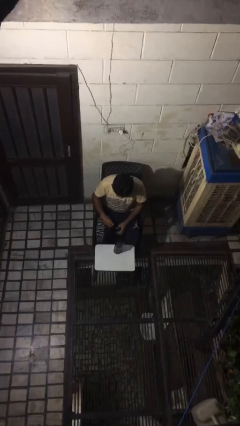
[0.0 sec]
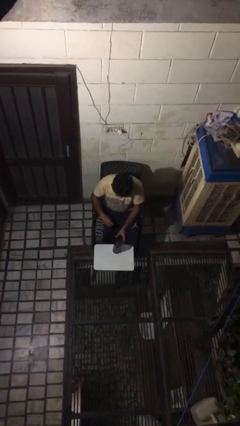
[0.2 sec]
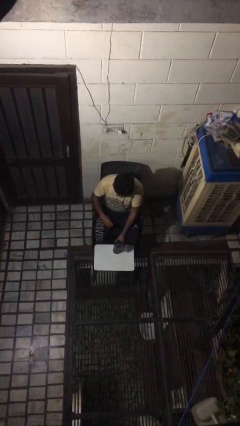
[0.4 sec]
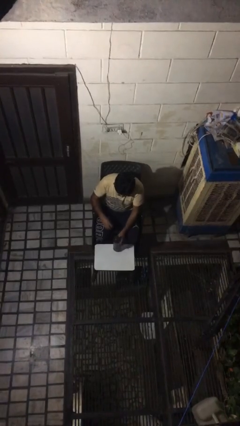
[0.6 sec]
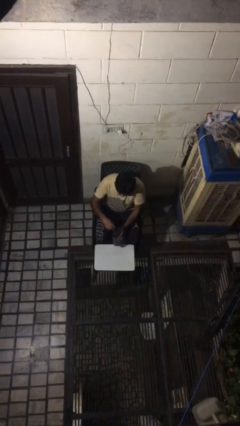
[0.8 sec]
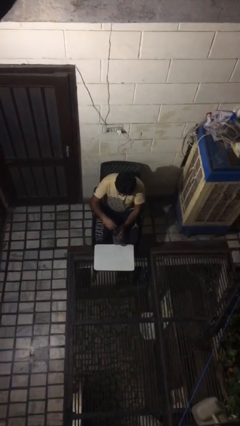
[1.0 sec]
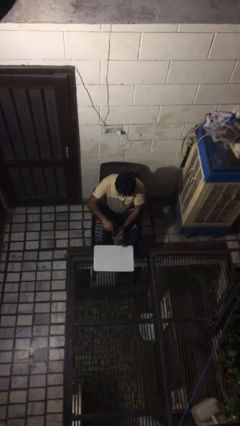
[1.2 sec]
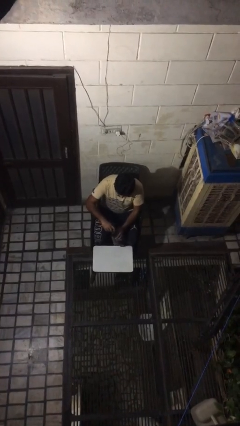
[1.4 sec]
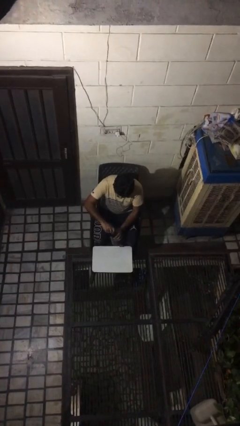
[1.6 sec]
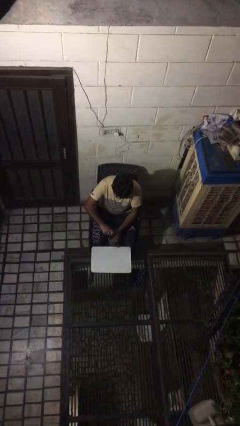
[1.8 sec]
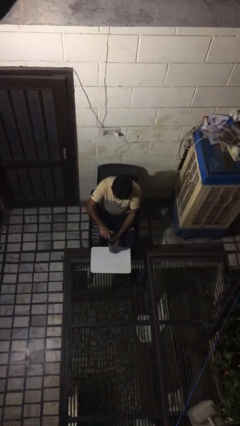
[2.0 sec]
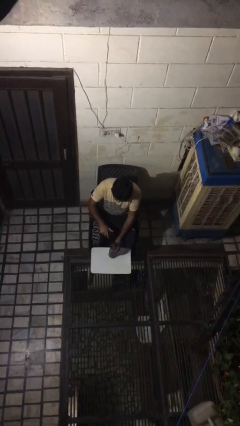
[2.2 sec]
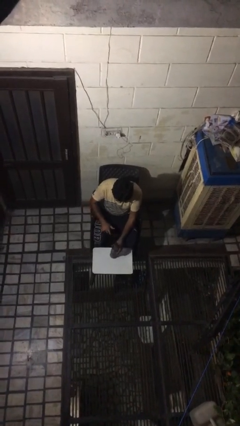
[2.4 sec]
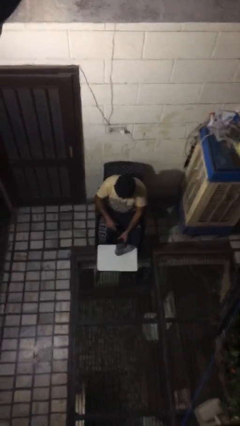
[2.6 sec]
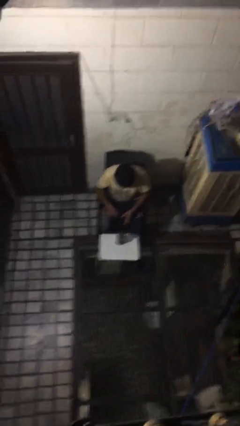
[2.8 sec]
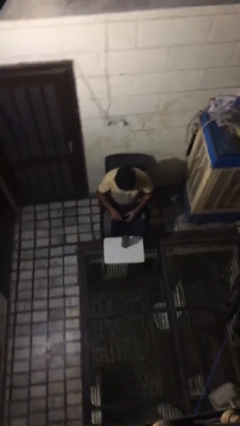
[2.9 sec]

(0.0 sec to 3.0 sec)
person screws lid to bottle

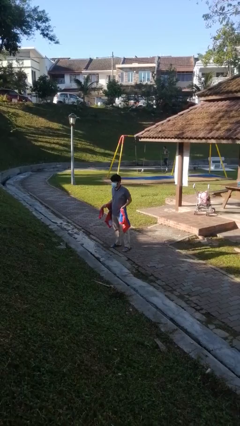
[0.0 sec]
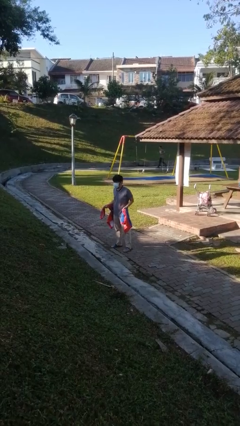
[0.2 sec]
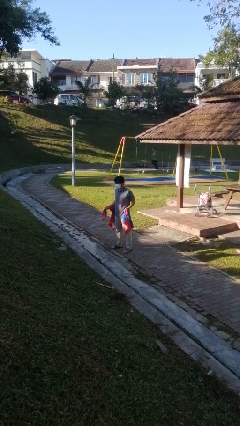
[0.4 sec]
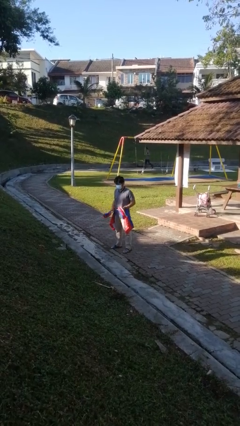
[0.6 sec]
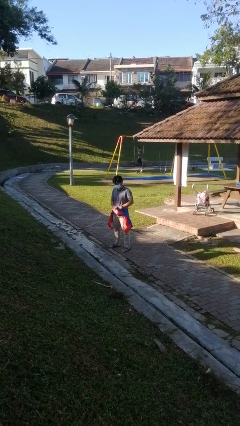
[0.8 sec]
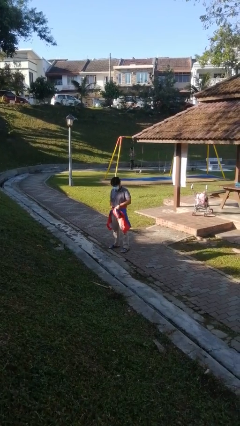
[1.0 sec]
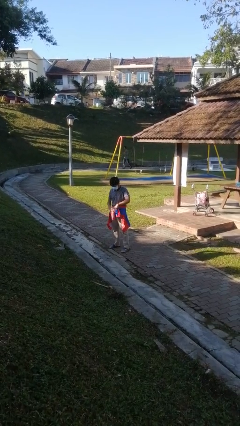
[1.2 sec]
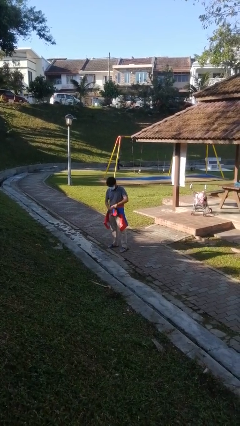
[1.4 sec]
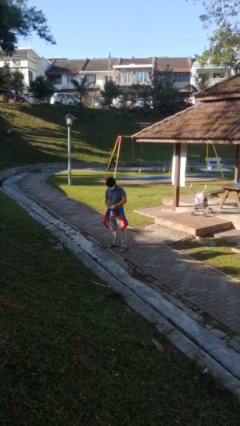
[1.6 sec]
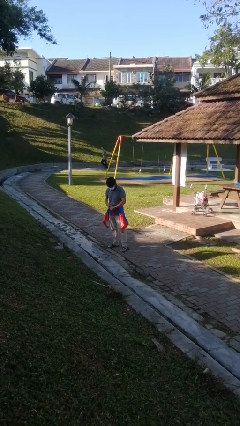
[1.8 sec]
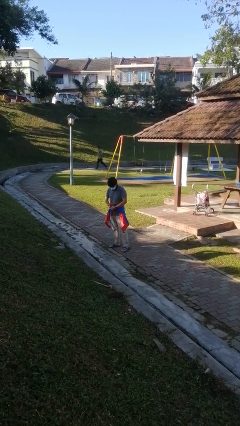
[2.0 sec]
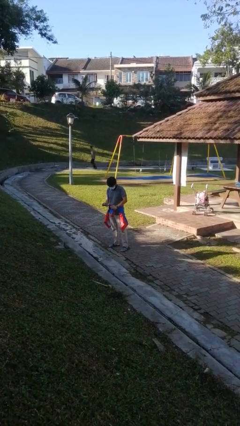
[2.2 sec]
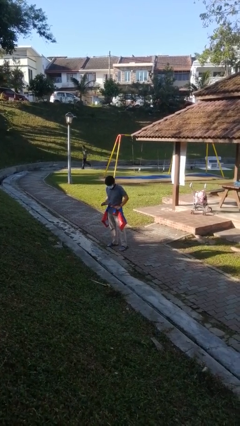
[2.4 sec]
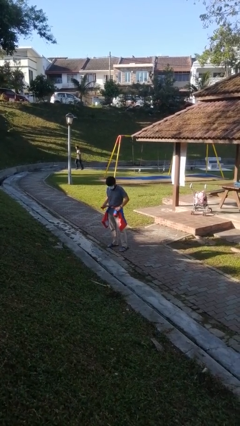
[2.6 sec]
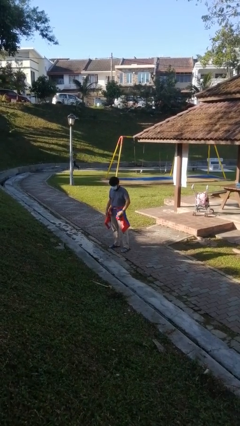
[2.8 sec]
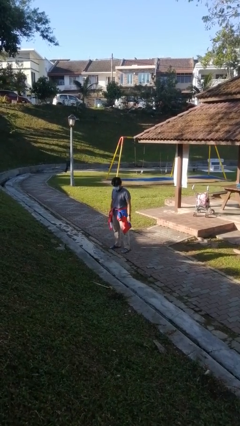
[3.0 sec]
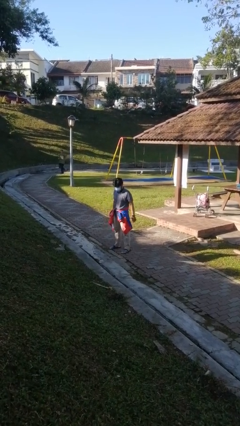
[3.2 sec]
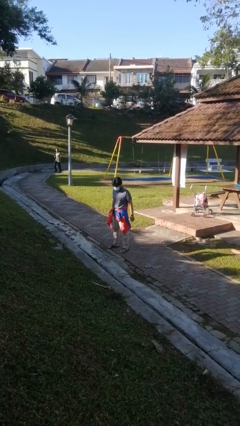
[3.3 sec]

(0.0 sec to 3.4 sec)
person ties jacket around waist

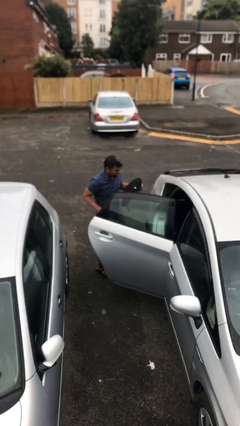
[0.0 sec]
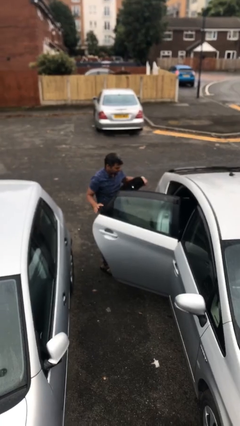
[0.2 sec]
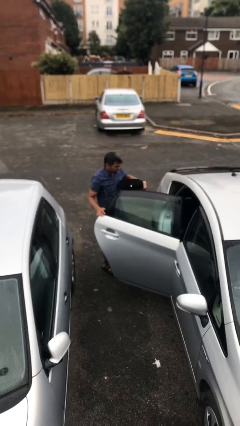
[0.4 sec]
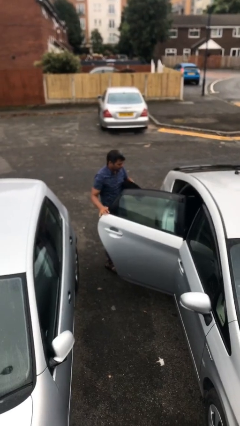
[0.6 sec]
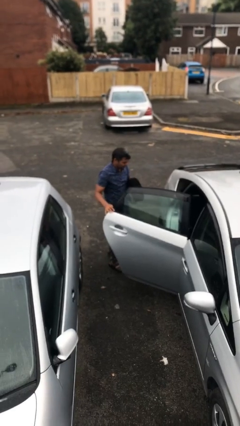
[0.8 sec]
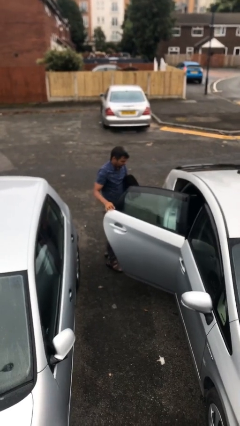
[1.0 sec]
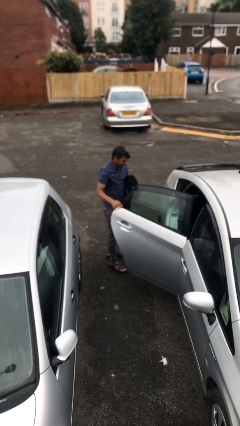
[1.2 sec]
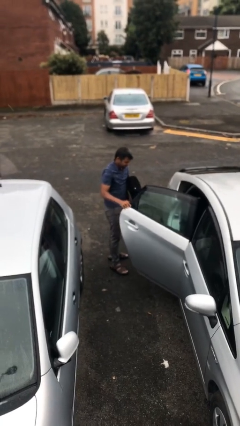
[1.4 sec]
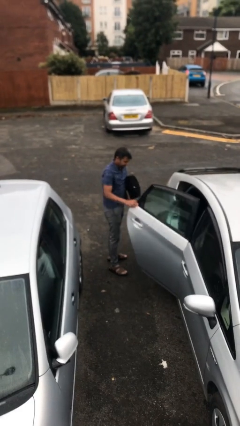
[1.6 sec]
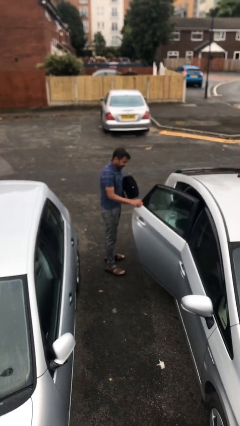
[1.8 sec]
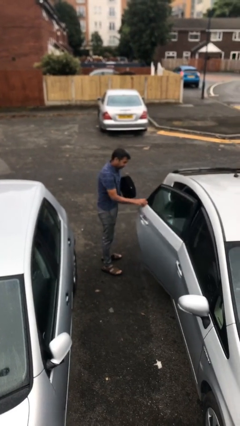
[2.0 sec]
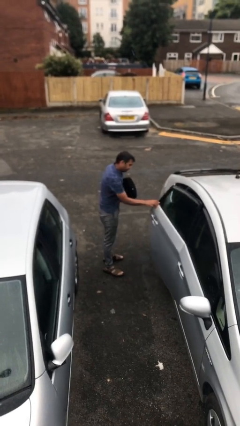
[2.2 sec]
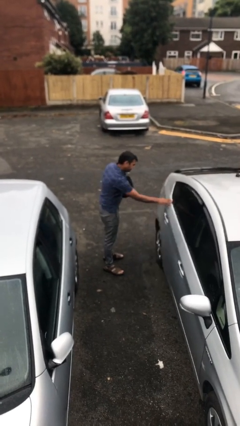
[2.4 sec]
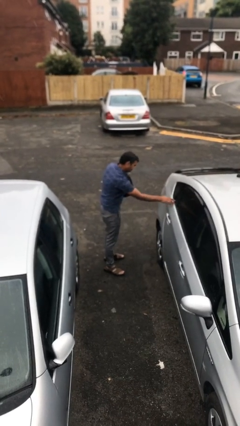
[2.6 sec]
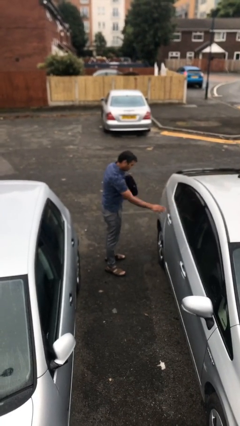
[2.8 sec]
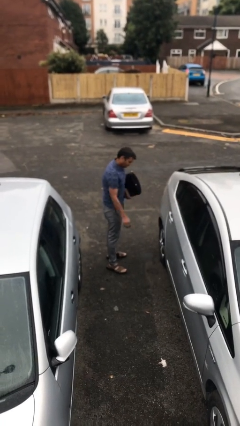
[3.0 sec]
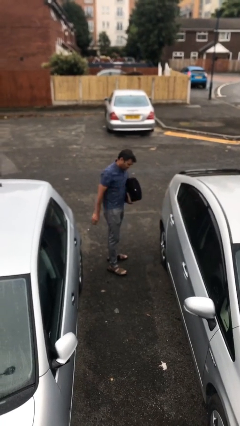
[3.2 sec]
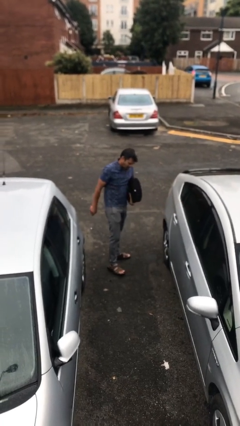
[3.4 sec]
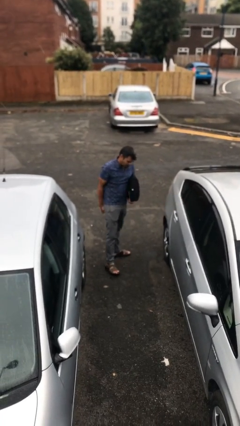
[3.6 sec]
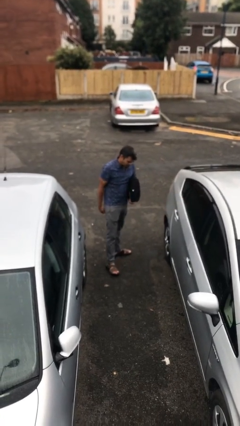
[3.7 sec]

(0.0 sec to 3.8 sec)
person closes car door

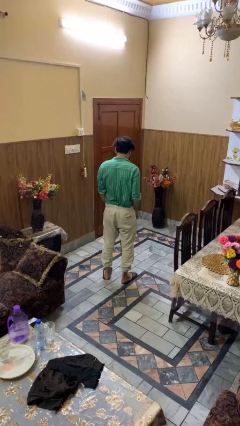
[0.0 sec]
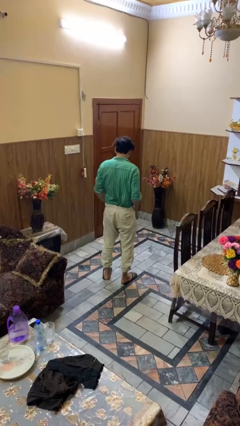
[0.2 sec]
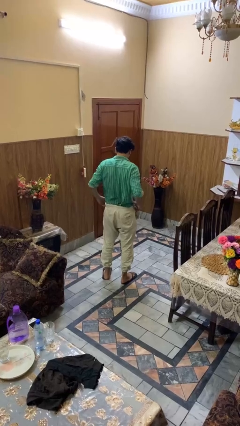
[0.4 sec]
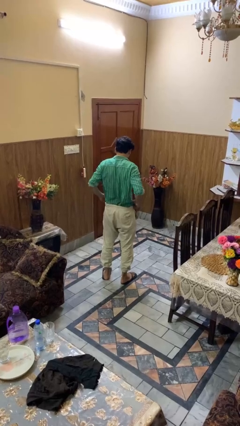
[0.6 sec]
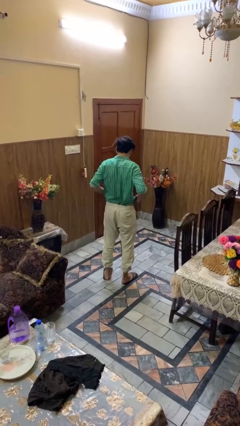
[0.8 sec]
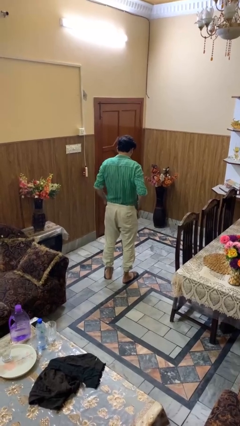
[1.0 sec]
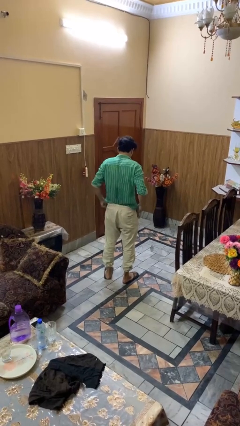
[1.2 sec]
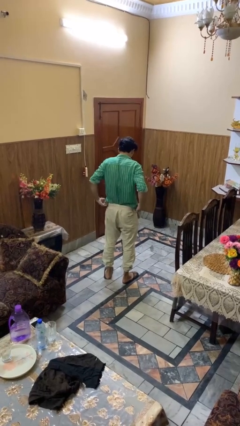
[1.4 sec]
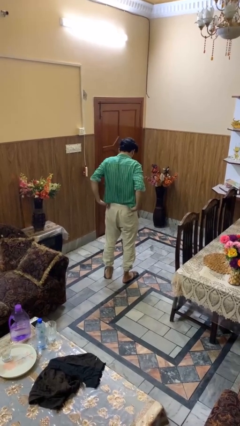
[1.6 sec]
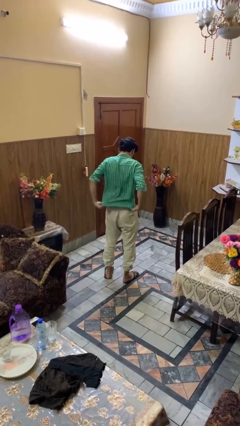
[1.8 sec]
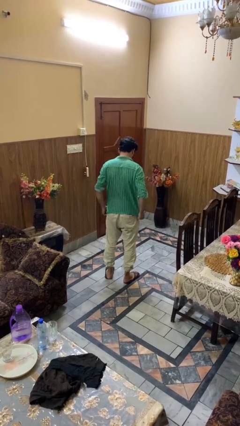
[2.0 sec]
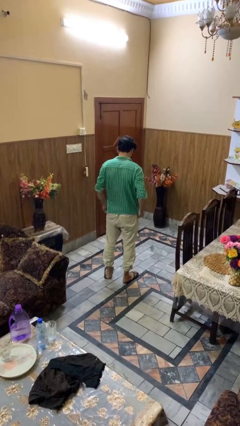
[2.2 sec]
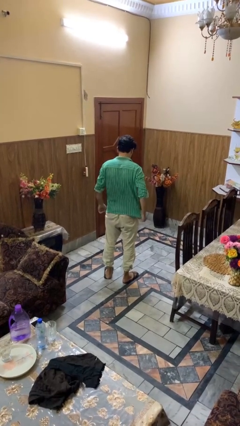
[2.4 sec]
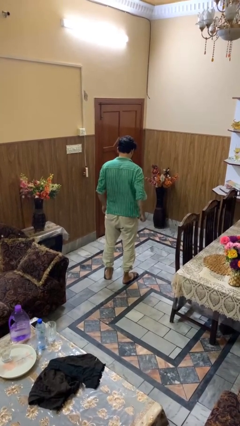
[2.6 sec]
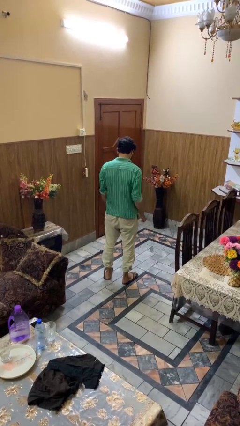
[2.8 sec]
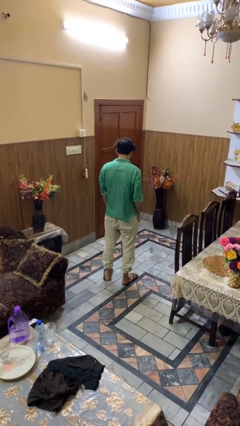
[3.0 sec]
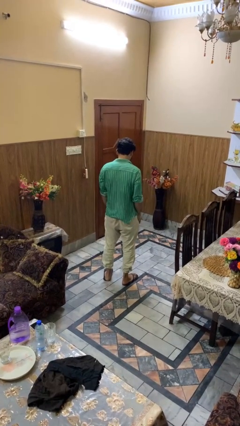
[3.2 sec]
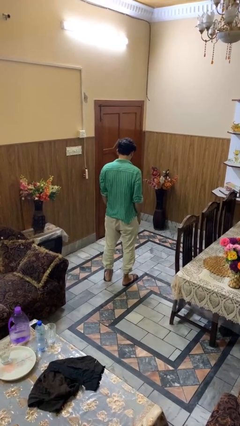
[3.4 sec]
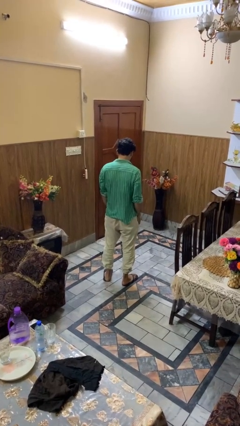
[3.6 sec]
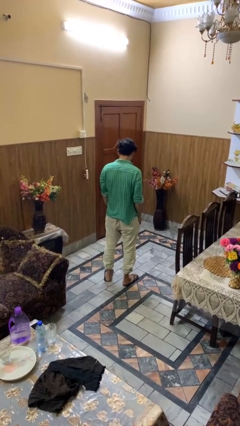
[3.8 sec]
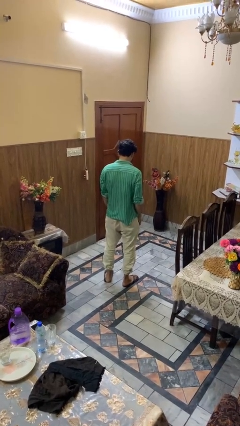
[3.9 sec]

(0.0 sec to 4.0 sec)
person untucks shirt

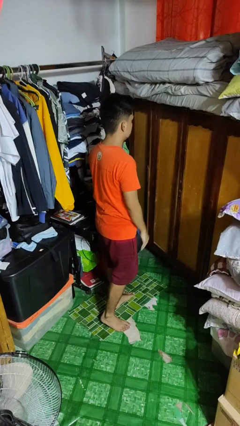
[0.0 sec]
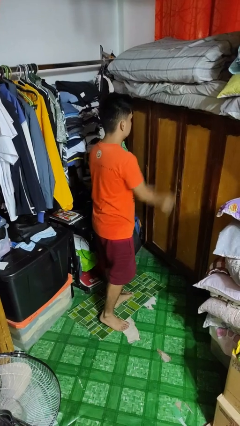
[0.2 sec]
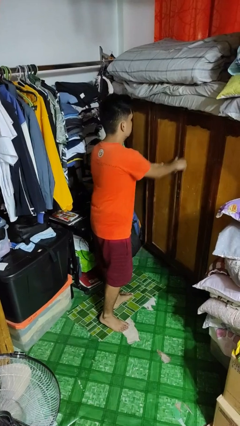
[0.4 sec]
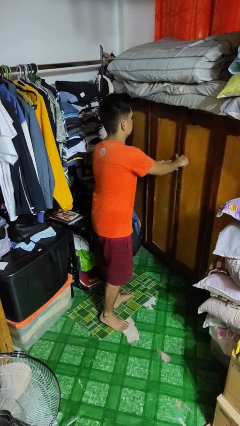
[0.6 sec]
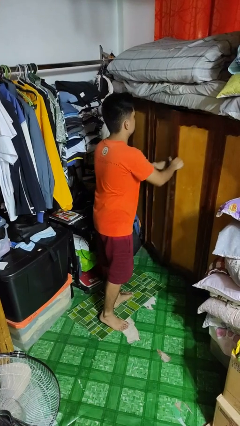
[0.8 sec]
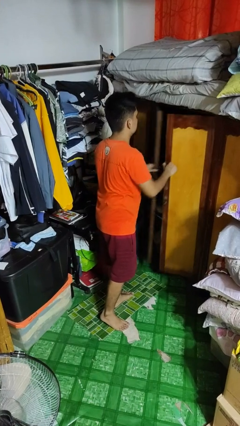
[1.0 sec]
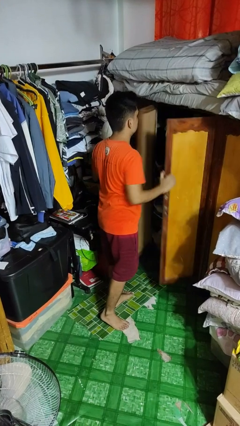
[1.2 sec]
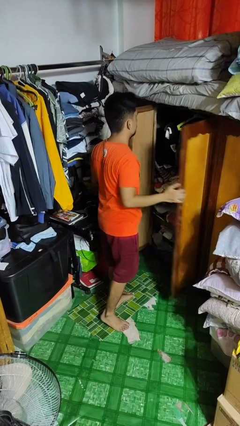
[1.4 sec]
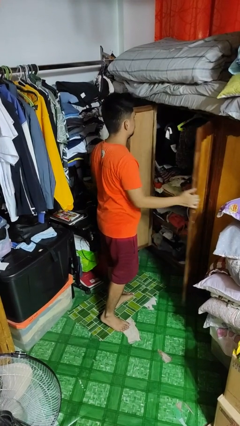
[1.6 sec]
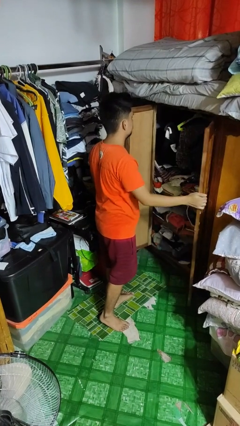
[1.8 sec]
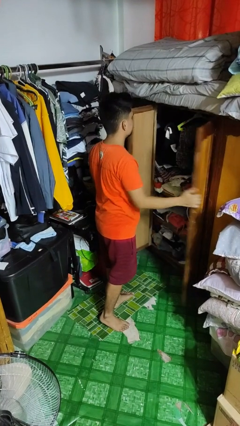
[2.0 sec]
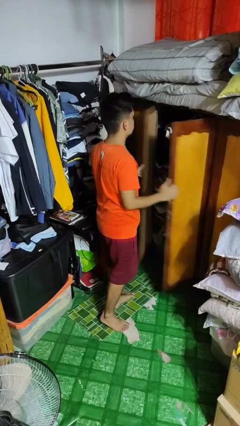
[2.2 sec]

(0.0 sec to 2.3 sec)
person opens closet door

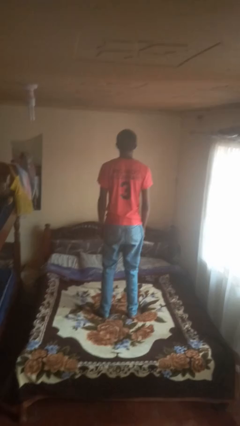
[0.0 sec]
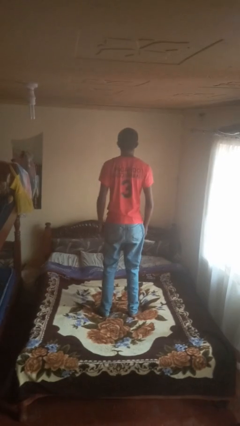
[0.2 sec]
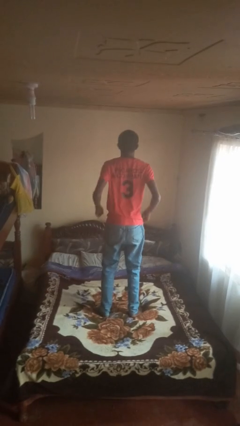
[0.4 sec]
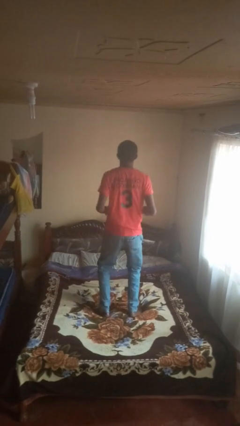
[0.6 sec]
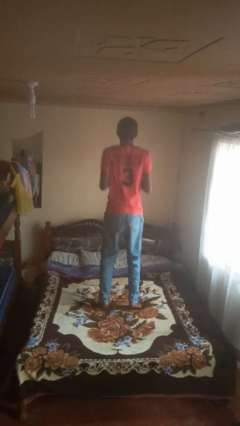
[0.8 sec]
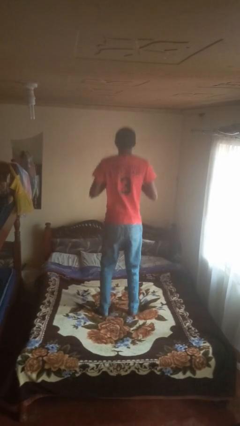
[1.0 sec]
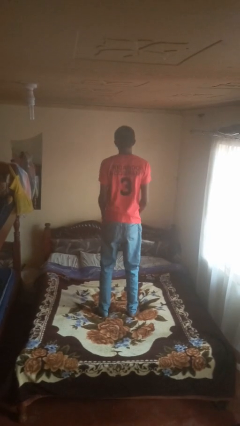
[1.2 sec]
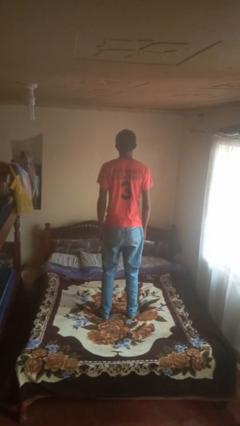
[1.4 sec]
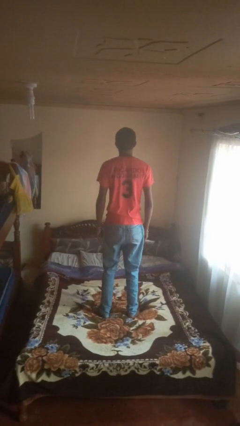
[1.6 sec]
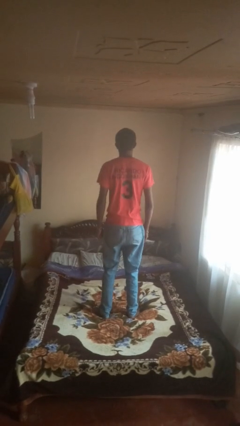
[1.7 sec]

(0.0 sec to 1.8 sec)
person jumps on bed
